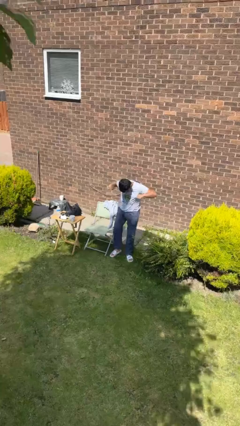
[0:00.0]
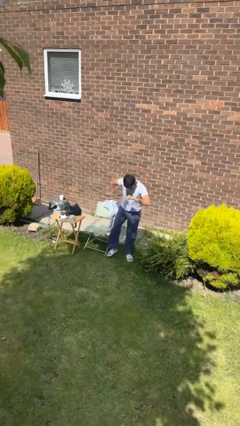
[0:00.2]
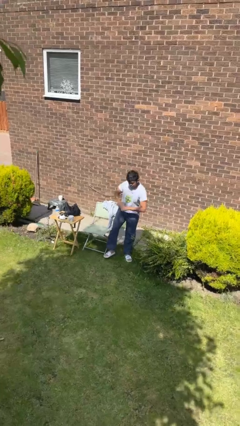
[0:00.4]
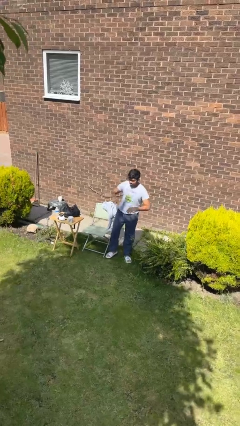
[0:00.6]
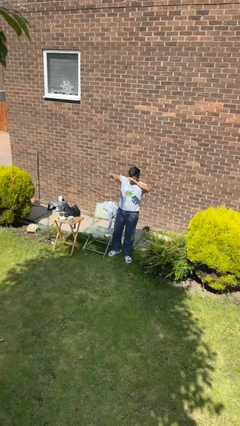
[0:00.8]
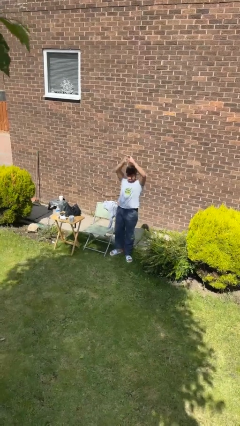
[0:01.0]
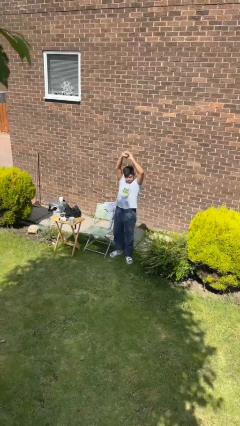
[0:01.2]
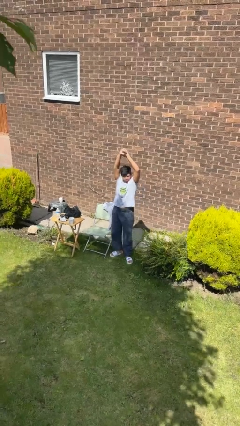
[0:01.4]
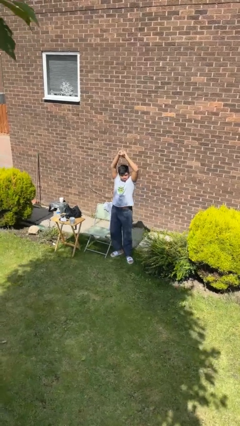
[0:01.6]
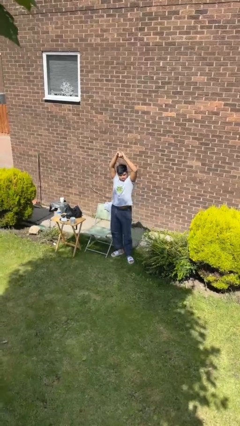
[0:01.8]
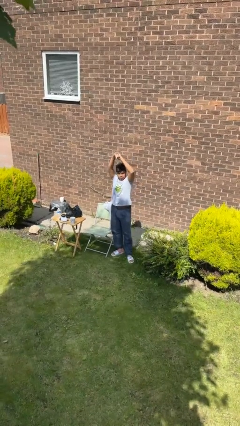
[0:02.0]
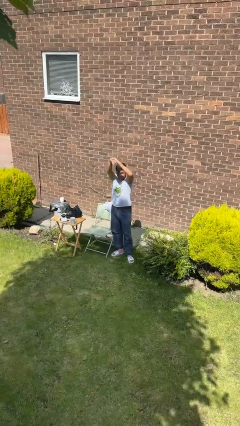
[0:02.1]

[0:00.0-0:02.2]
person stretches arms over head

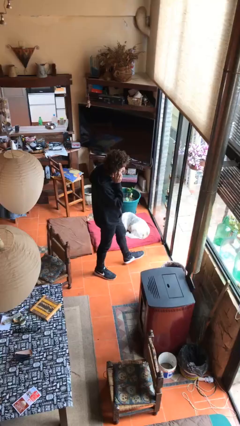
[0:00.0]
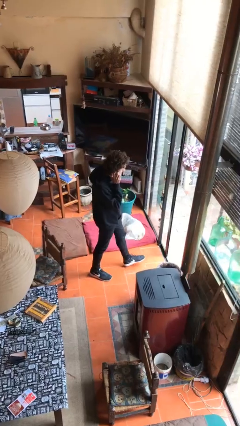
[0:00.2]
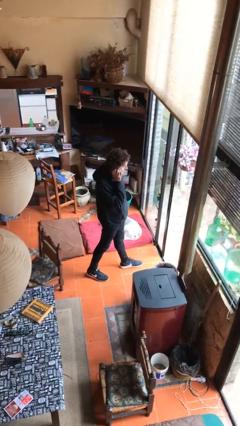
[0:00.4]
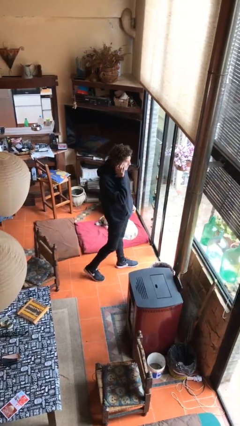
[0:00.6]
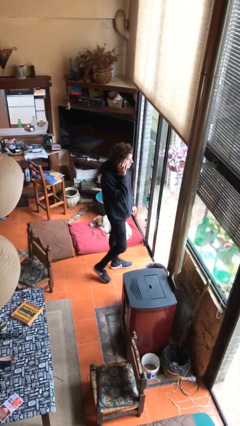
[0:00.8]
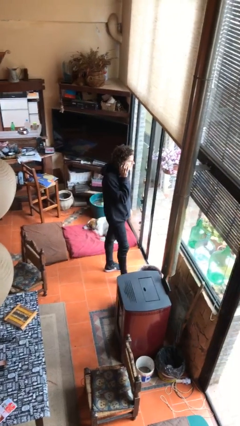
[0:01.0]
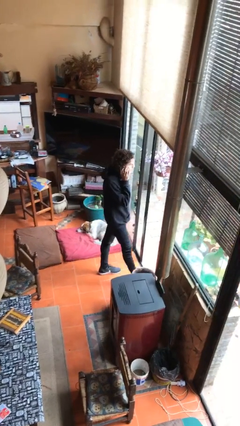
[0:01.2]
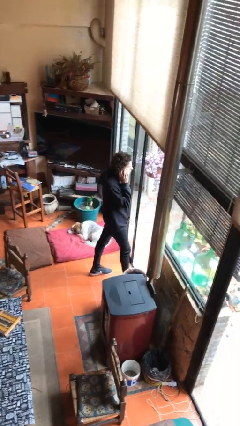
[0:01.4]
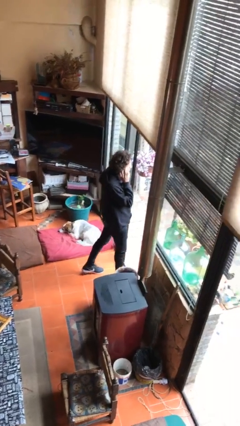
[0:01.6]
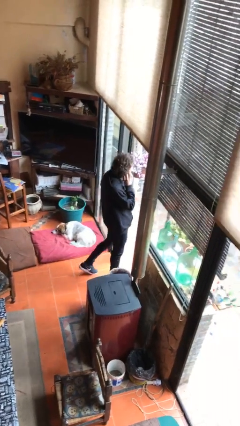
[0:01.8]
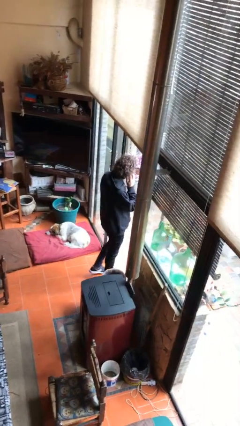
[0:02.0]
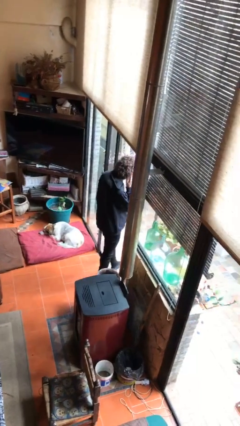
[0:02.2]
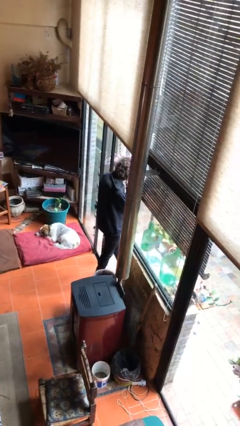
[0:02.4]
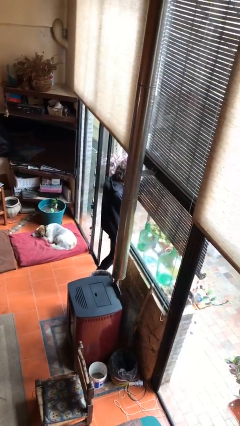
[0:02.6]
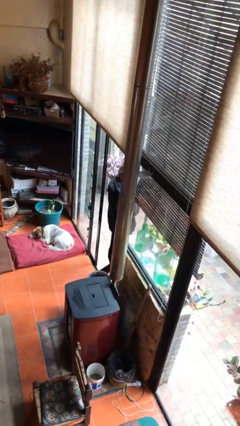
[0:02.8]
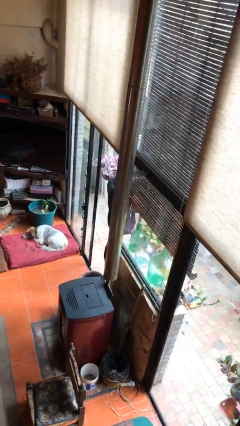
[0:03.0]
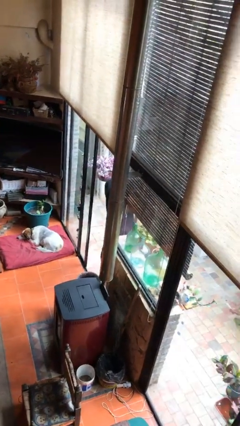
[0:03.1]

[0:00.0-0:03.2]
person exits scene through structure

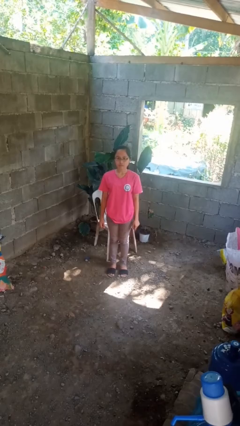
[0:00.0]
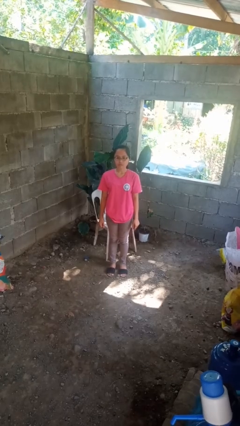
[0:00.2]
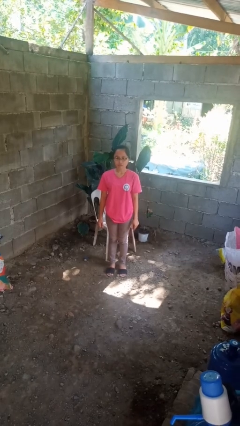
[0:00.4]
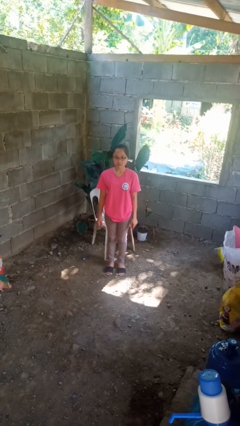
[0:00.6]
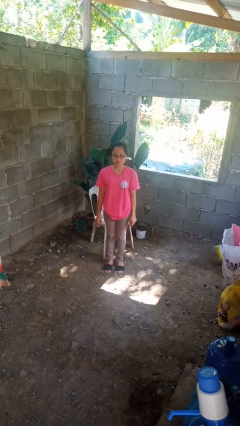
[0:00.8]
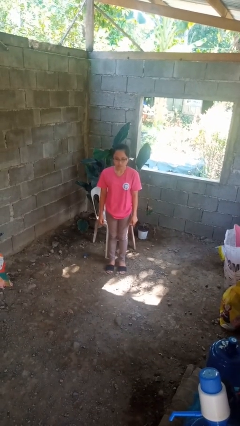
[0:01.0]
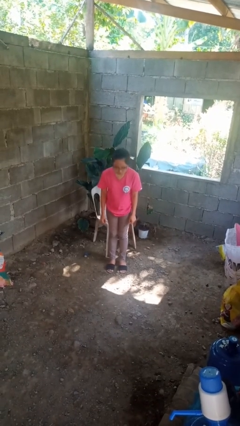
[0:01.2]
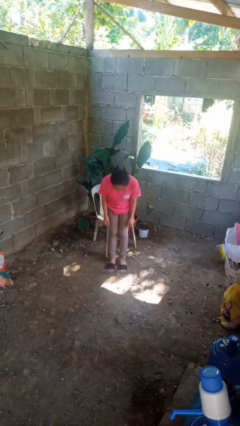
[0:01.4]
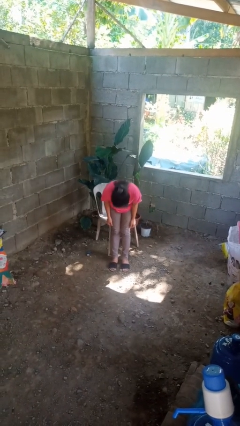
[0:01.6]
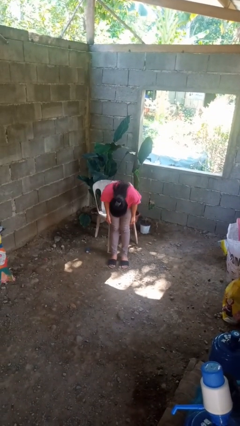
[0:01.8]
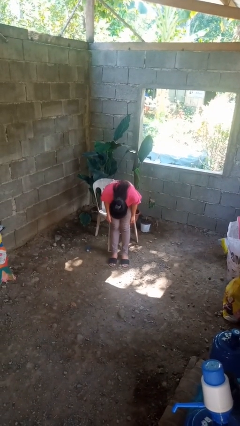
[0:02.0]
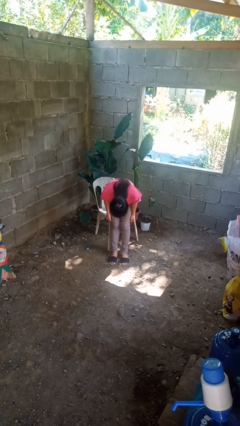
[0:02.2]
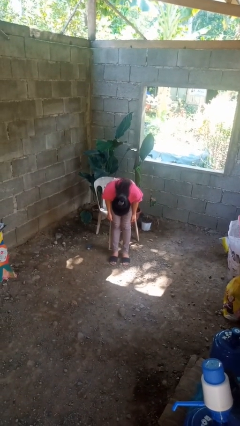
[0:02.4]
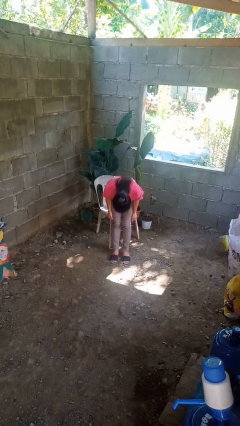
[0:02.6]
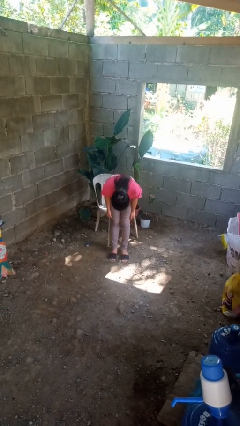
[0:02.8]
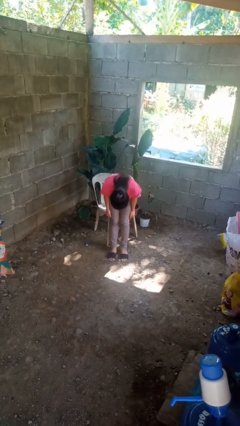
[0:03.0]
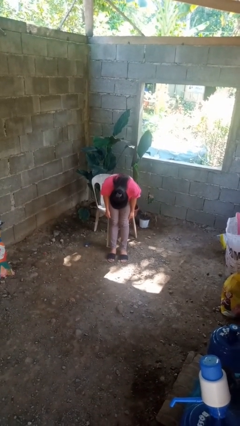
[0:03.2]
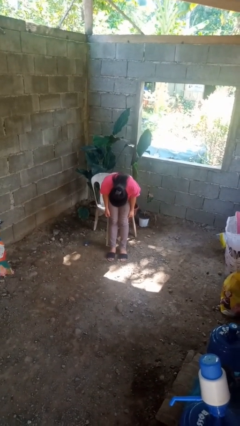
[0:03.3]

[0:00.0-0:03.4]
person bows

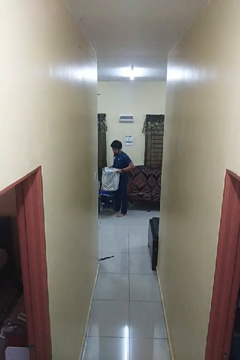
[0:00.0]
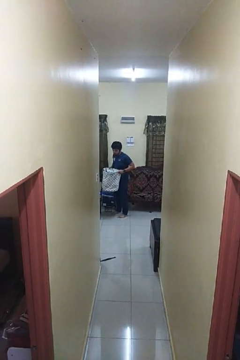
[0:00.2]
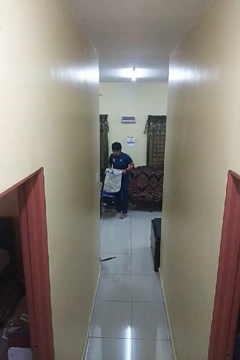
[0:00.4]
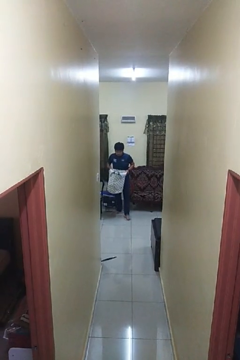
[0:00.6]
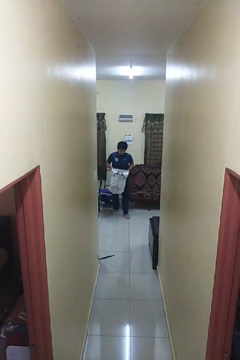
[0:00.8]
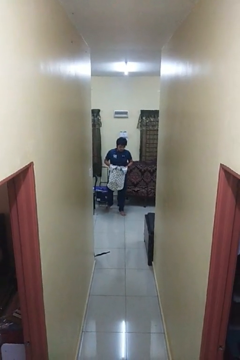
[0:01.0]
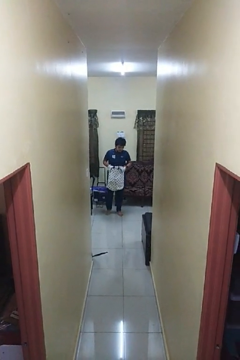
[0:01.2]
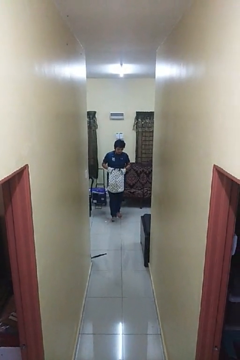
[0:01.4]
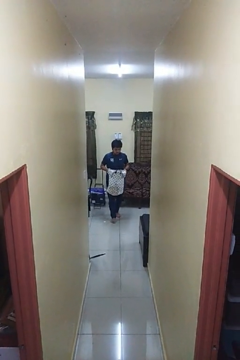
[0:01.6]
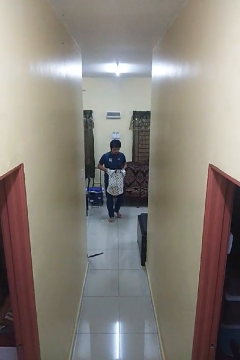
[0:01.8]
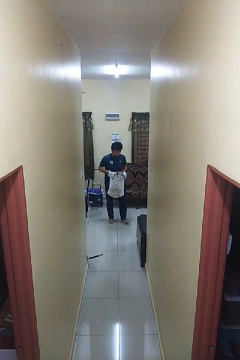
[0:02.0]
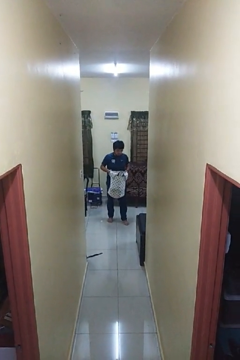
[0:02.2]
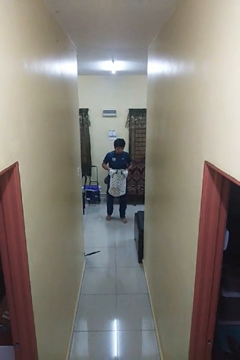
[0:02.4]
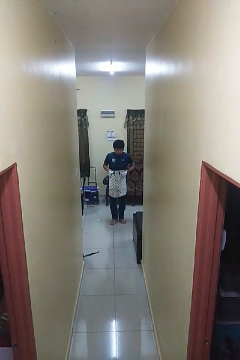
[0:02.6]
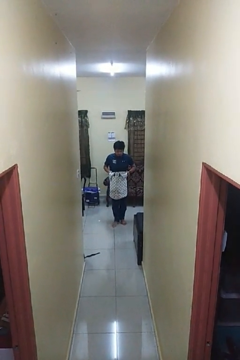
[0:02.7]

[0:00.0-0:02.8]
person carries laundry basket

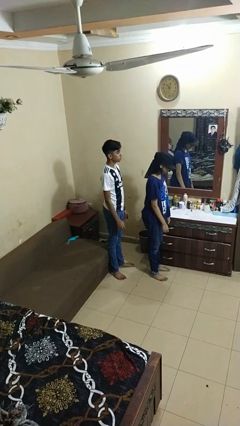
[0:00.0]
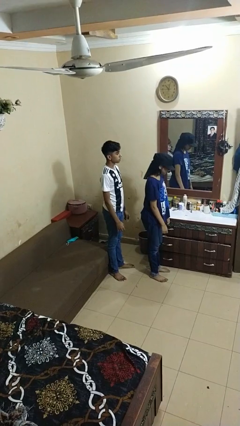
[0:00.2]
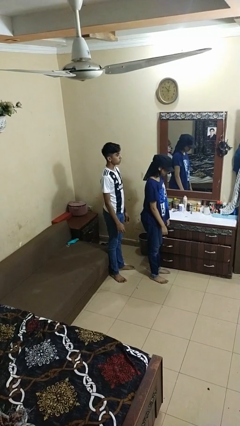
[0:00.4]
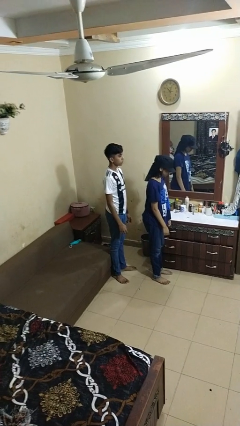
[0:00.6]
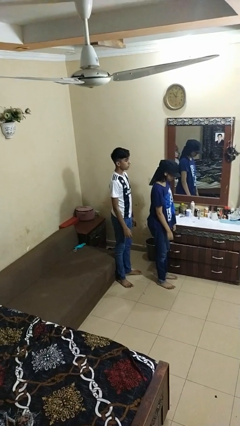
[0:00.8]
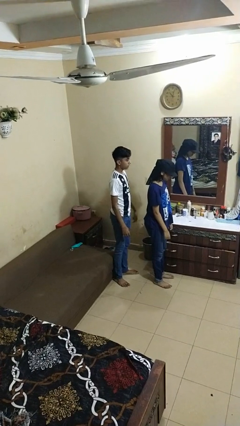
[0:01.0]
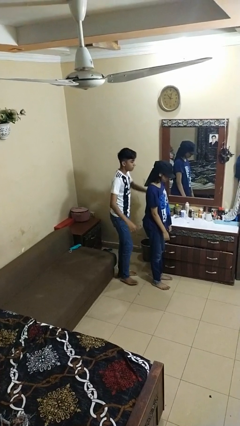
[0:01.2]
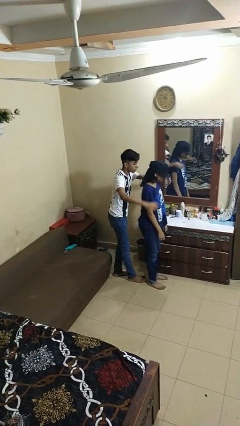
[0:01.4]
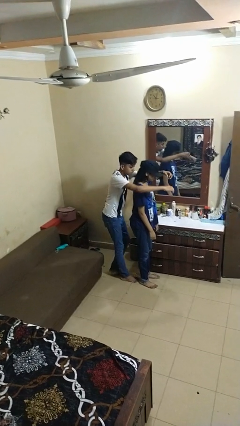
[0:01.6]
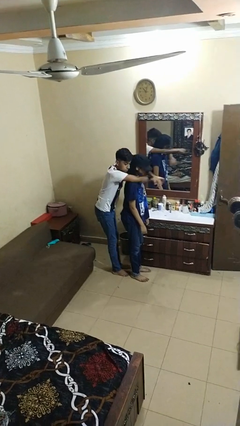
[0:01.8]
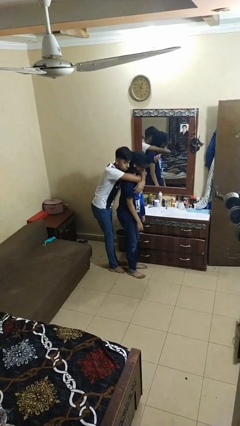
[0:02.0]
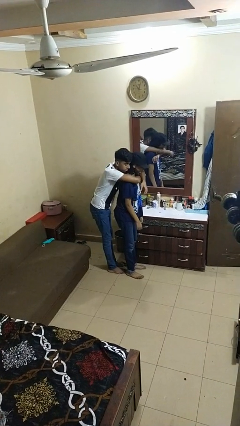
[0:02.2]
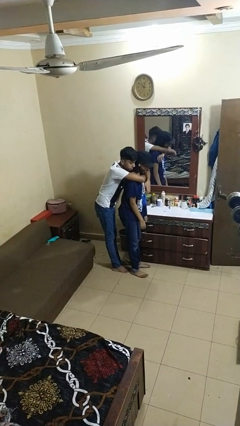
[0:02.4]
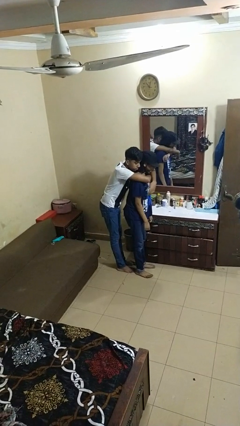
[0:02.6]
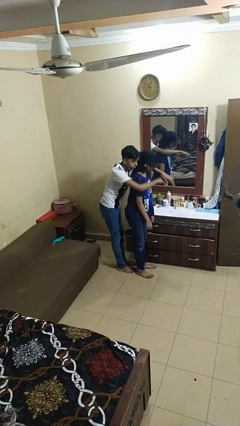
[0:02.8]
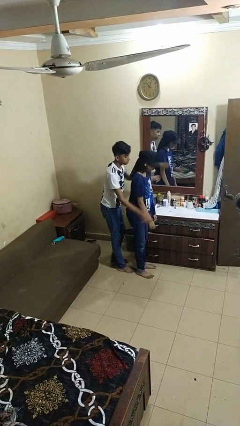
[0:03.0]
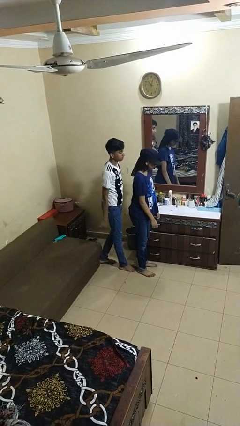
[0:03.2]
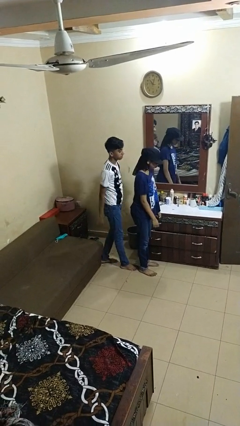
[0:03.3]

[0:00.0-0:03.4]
person hugs person from behind

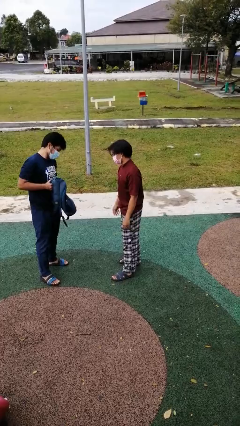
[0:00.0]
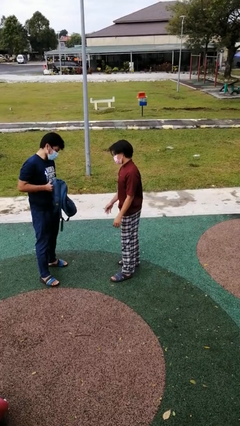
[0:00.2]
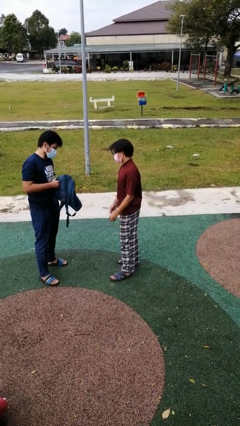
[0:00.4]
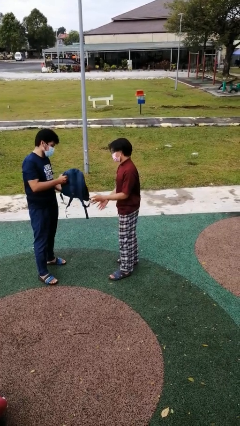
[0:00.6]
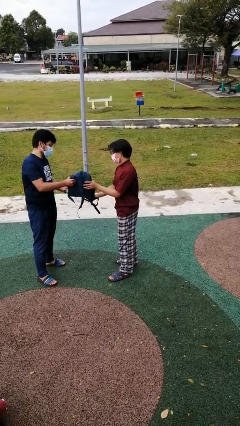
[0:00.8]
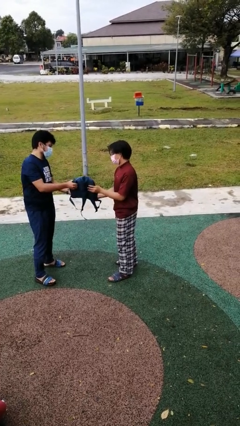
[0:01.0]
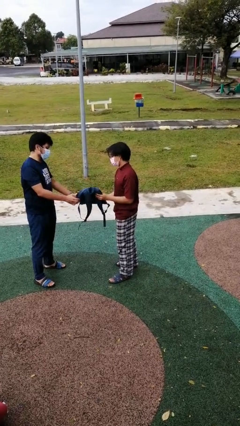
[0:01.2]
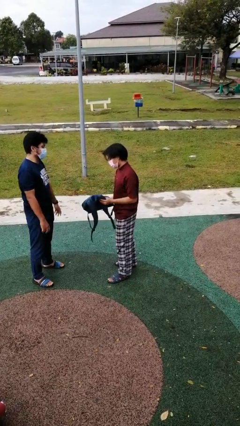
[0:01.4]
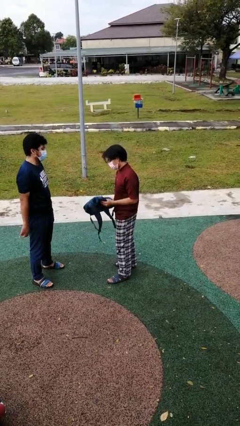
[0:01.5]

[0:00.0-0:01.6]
person transfers object to person

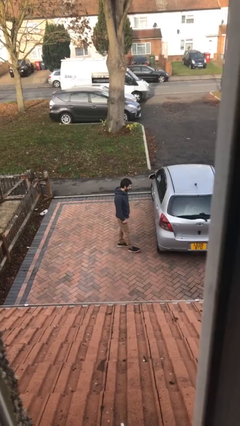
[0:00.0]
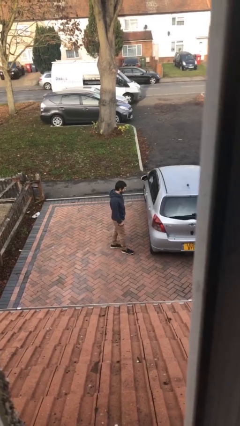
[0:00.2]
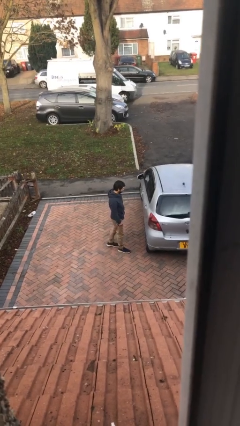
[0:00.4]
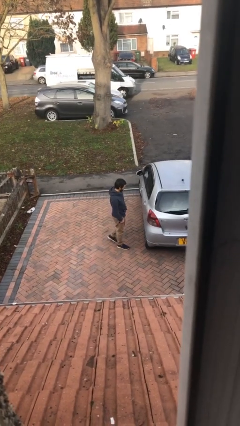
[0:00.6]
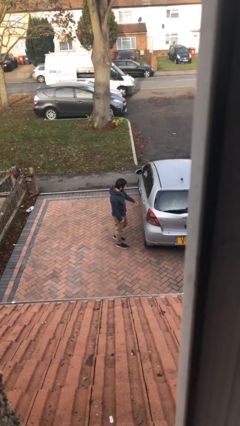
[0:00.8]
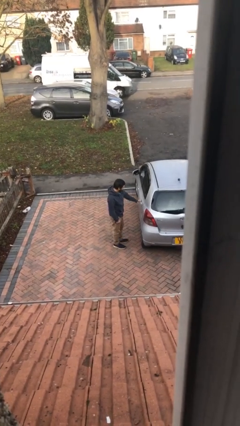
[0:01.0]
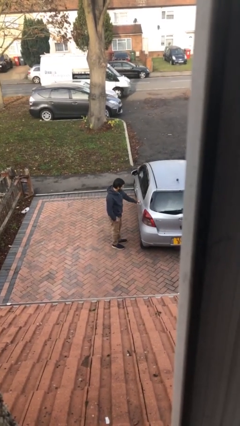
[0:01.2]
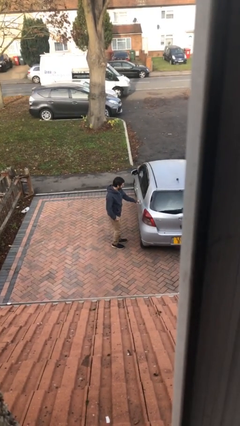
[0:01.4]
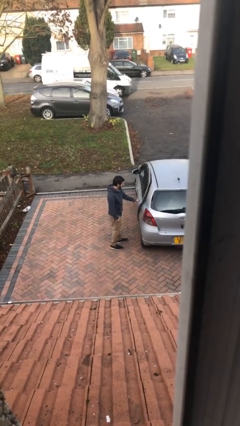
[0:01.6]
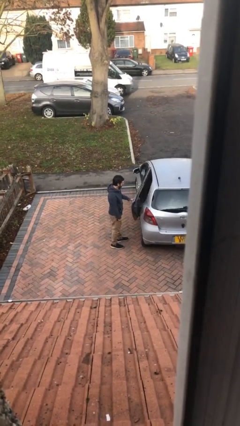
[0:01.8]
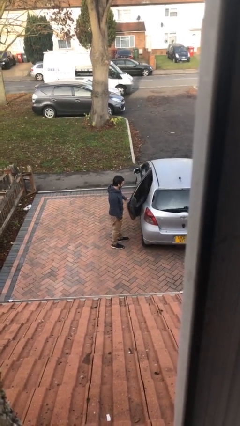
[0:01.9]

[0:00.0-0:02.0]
person opens car door
